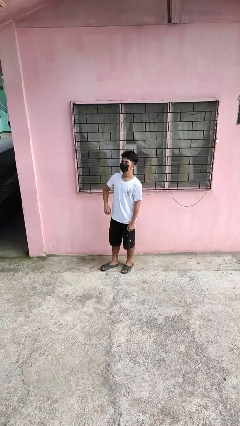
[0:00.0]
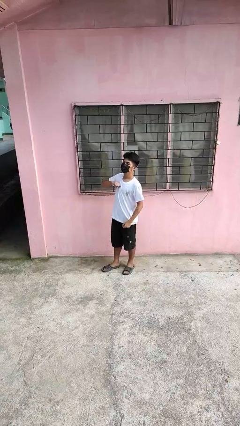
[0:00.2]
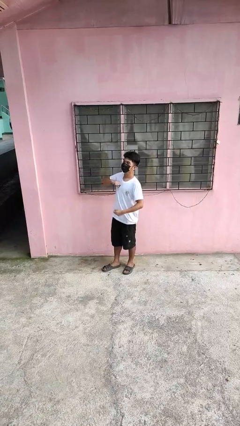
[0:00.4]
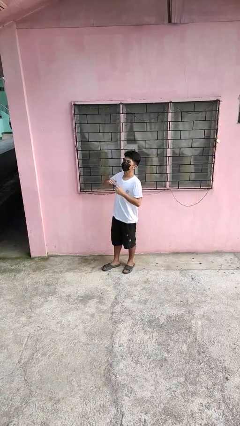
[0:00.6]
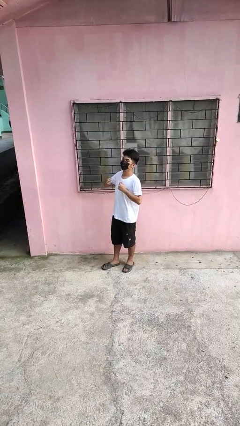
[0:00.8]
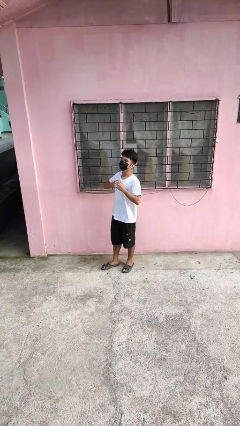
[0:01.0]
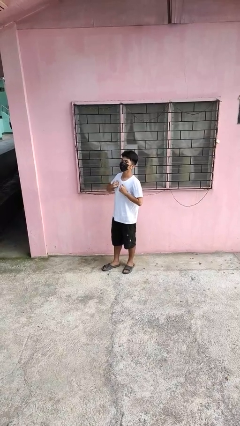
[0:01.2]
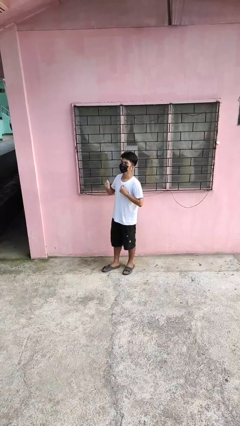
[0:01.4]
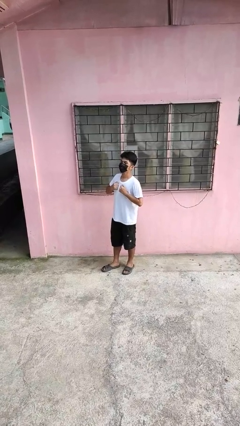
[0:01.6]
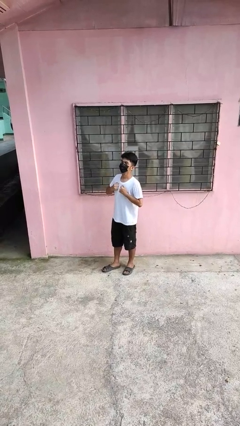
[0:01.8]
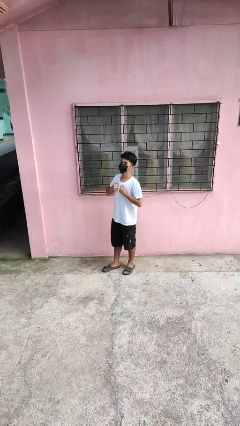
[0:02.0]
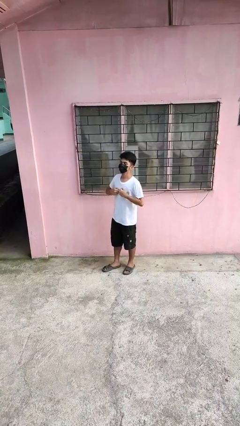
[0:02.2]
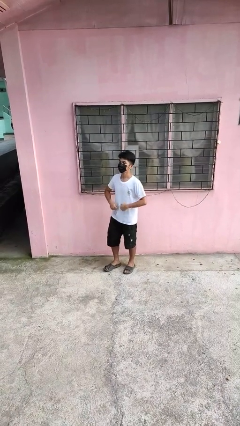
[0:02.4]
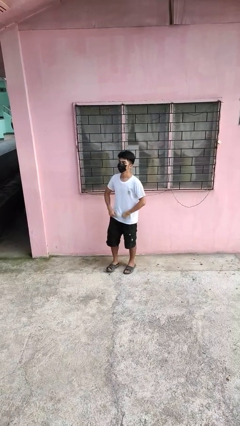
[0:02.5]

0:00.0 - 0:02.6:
person drums on chest

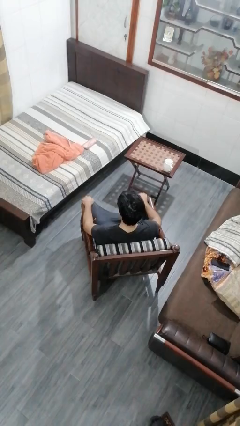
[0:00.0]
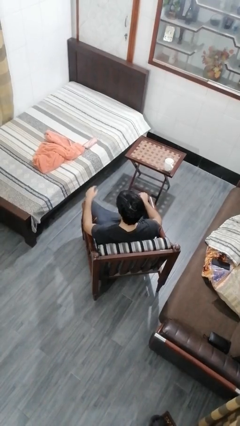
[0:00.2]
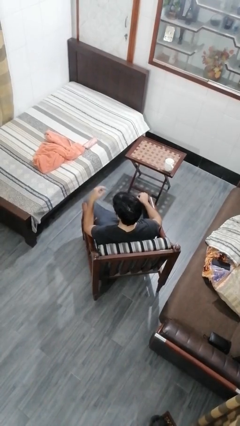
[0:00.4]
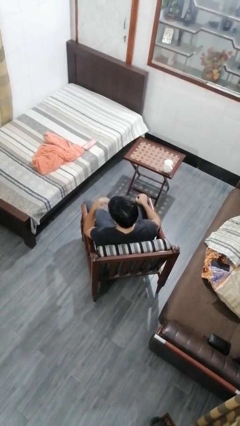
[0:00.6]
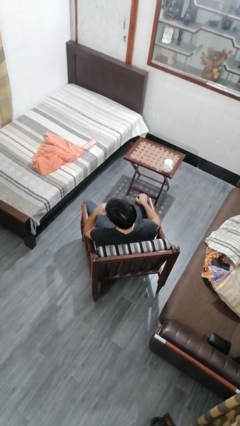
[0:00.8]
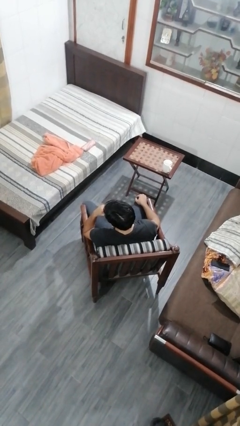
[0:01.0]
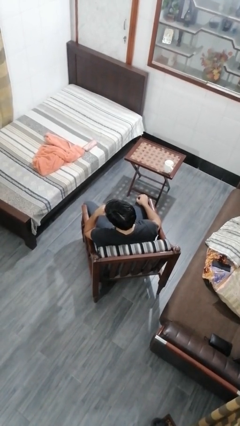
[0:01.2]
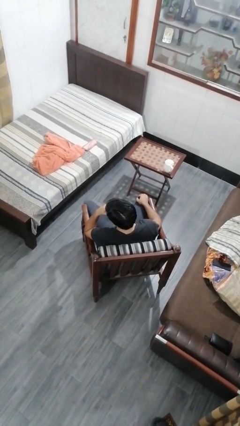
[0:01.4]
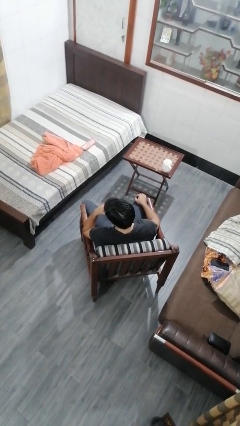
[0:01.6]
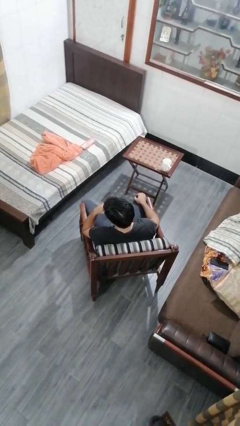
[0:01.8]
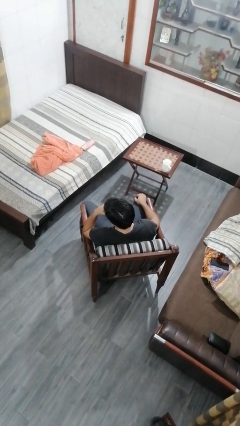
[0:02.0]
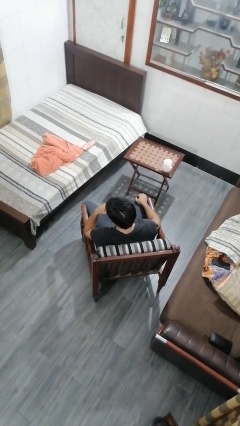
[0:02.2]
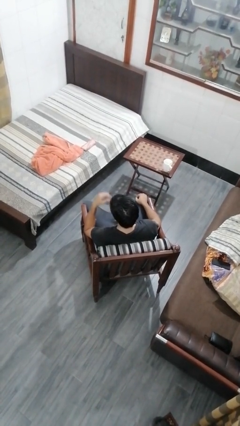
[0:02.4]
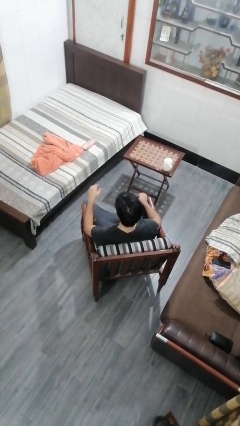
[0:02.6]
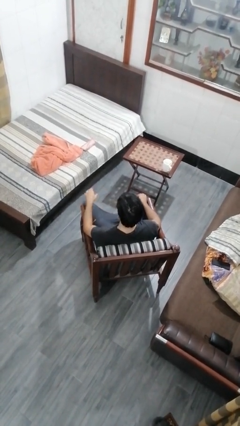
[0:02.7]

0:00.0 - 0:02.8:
person strokes chin

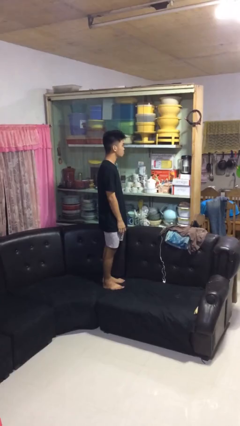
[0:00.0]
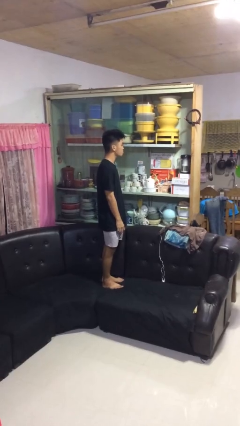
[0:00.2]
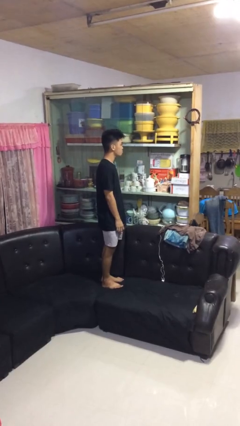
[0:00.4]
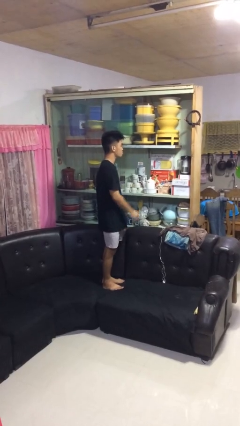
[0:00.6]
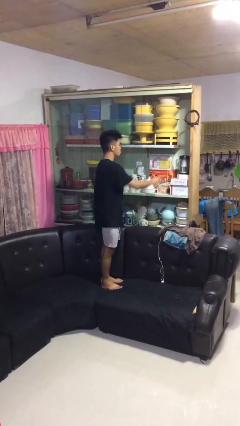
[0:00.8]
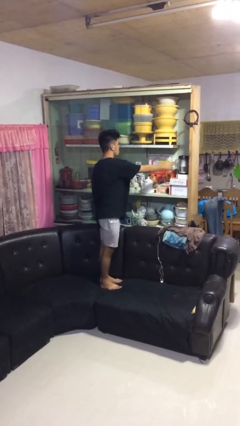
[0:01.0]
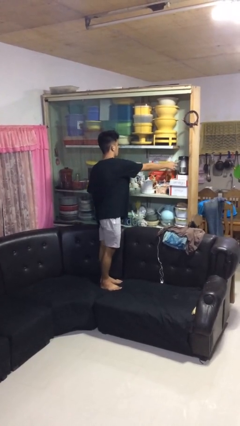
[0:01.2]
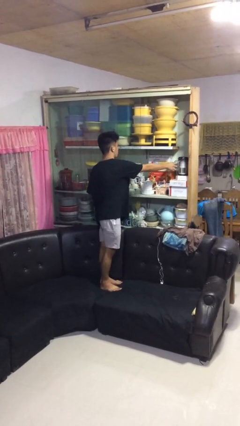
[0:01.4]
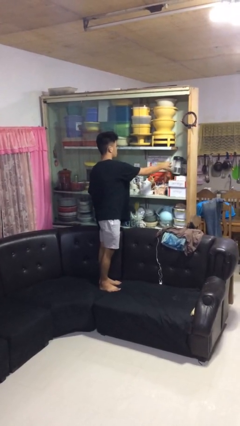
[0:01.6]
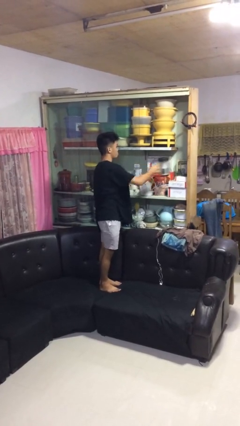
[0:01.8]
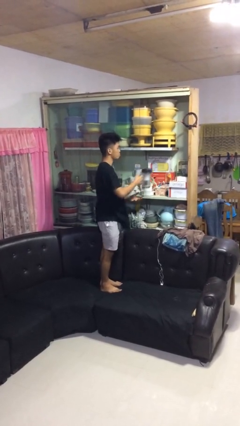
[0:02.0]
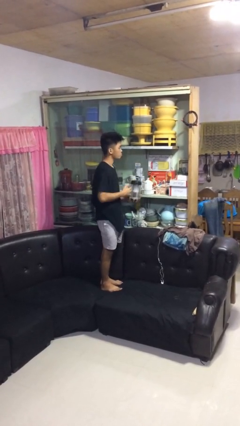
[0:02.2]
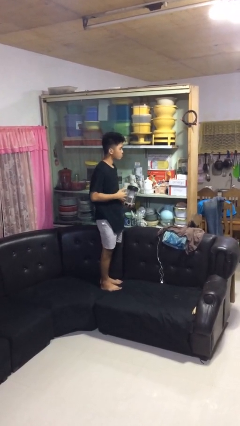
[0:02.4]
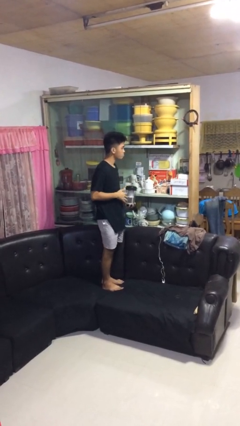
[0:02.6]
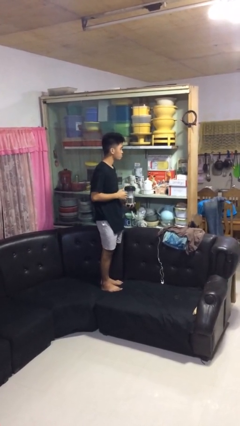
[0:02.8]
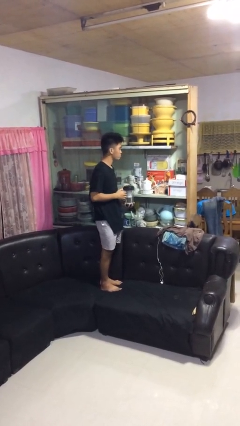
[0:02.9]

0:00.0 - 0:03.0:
person picks up object from cabinet

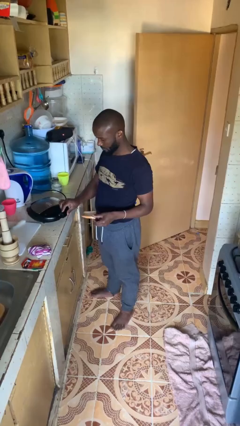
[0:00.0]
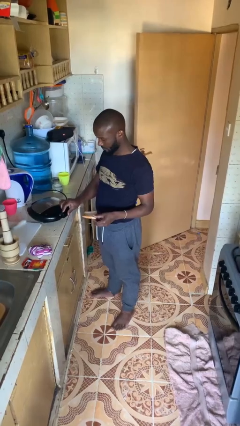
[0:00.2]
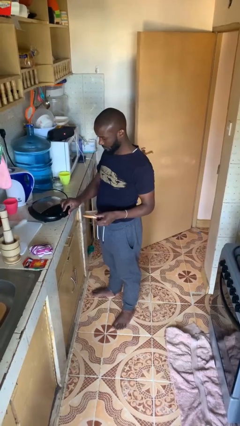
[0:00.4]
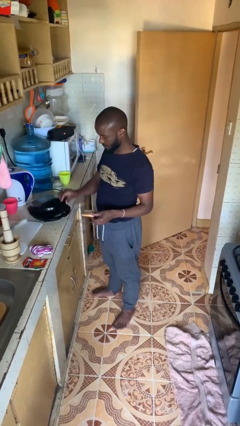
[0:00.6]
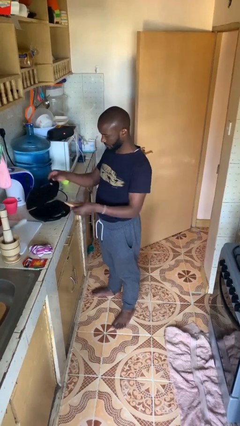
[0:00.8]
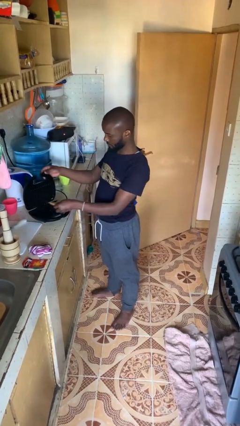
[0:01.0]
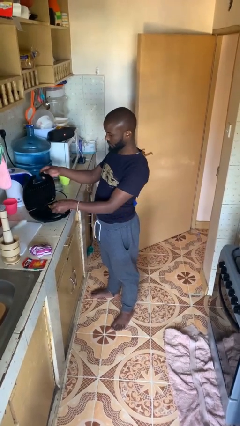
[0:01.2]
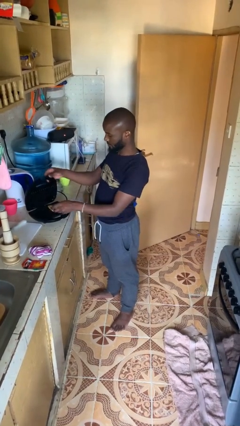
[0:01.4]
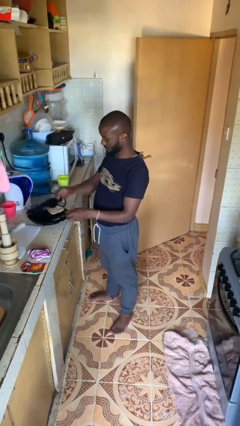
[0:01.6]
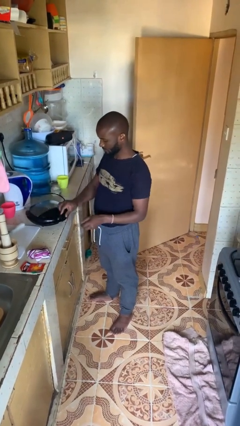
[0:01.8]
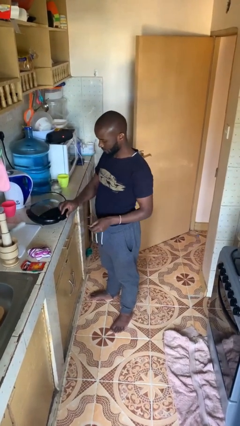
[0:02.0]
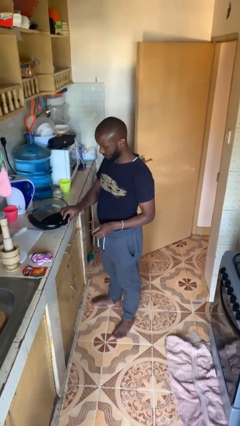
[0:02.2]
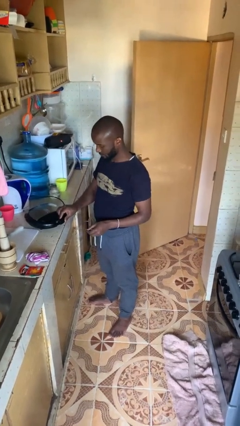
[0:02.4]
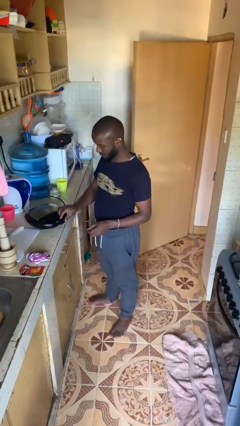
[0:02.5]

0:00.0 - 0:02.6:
person puts object into toaster

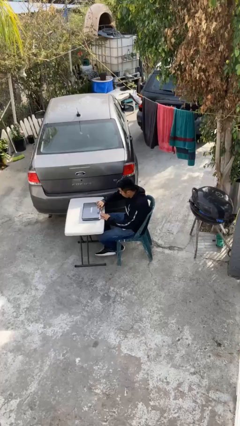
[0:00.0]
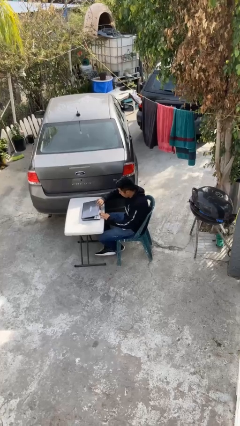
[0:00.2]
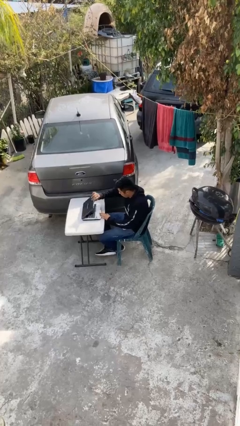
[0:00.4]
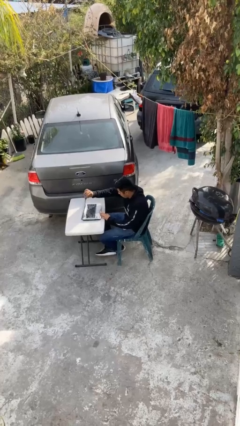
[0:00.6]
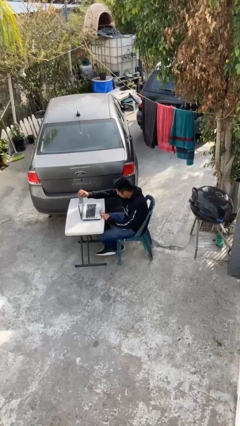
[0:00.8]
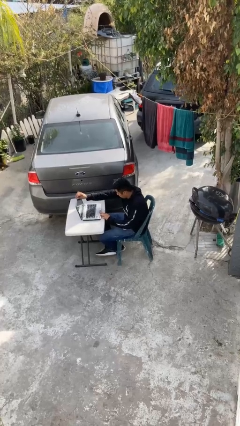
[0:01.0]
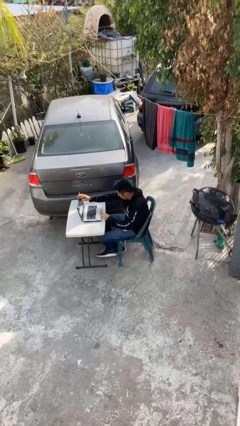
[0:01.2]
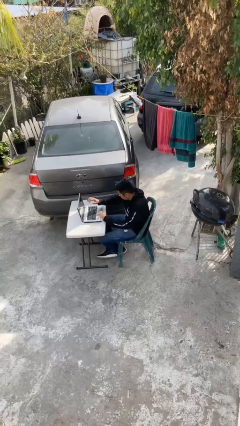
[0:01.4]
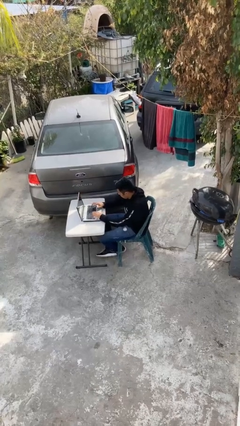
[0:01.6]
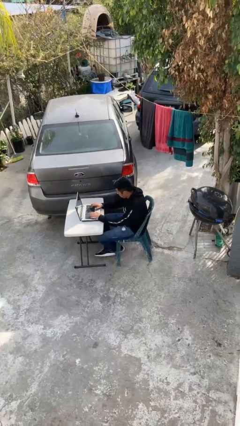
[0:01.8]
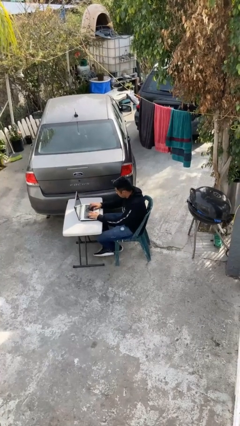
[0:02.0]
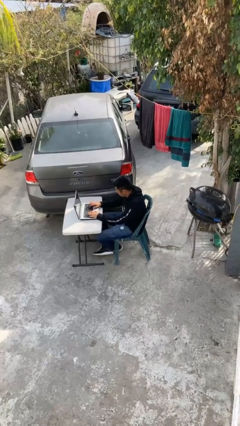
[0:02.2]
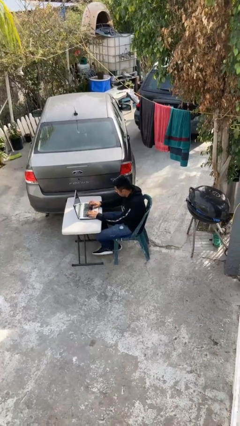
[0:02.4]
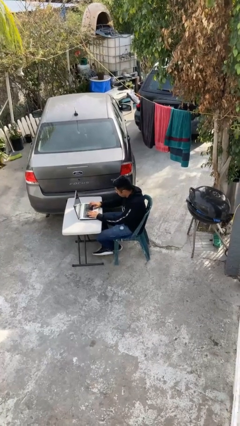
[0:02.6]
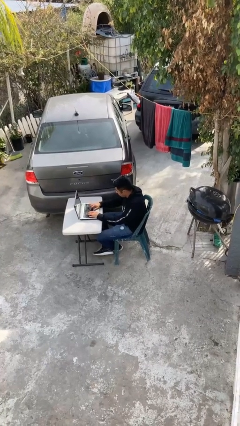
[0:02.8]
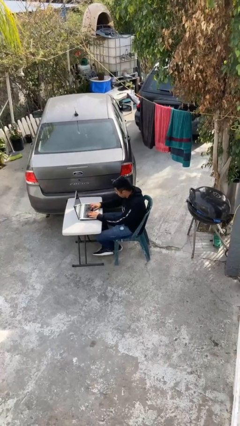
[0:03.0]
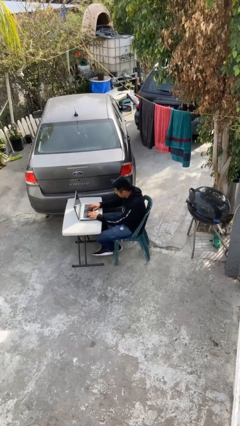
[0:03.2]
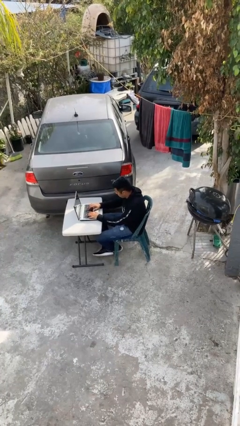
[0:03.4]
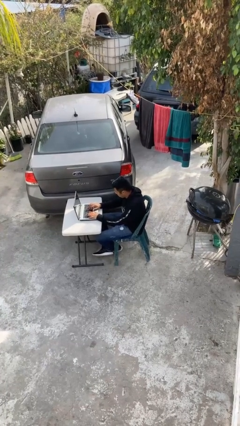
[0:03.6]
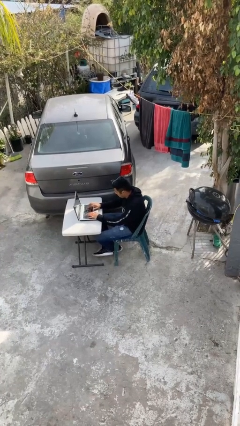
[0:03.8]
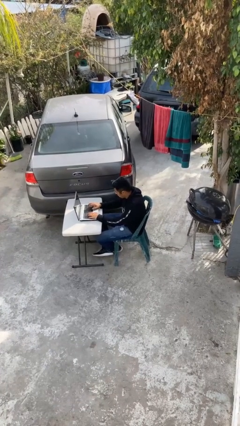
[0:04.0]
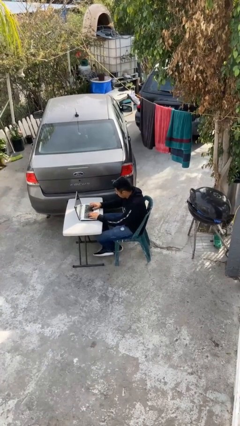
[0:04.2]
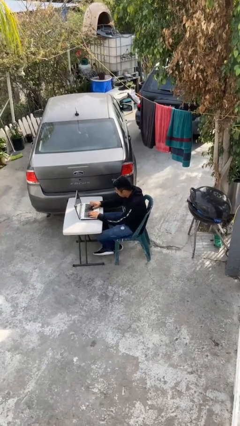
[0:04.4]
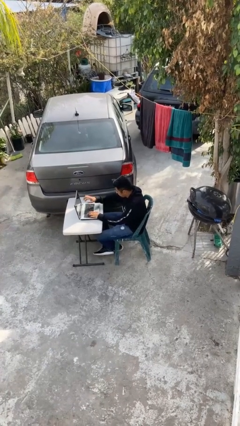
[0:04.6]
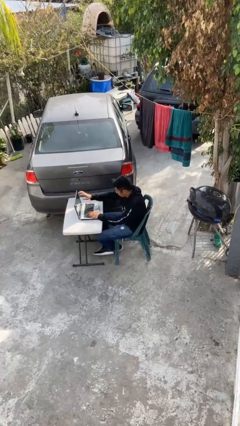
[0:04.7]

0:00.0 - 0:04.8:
person interacts with laptop

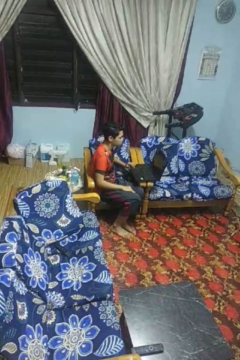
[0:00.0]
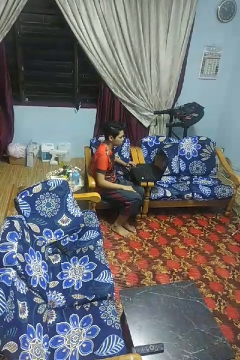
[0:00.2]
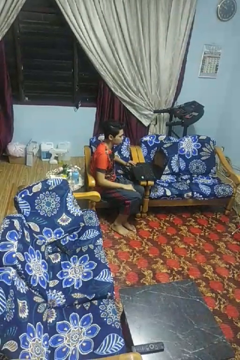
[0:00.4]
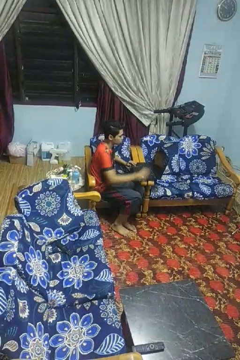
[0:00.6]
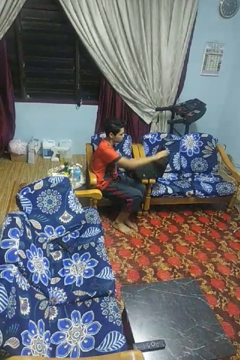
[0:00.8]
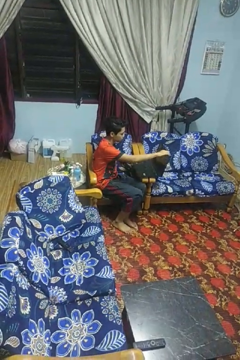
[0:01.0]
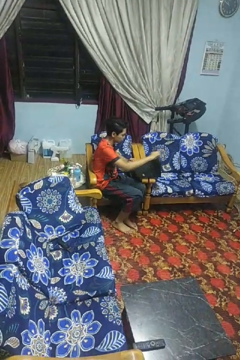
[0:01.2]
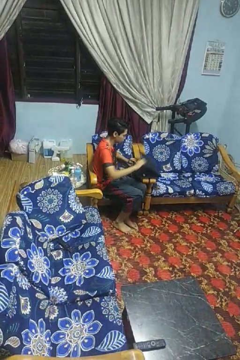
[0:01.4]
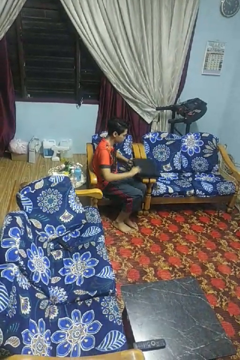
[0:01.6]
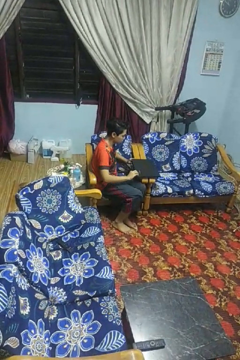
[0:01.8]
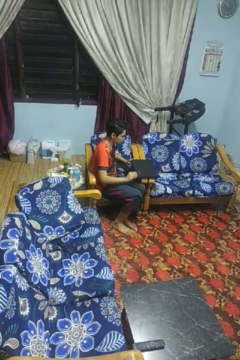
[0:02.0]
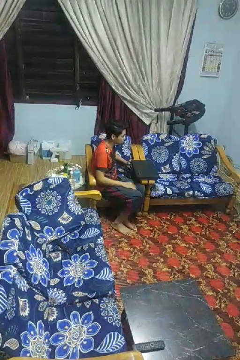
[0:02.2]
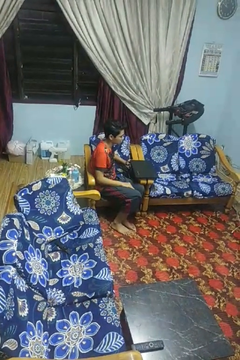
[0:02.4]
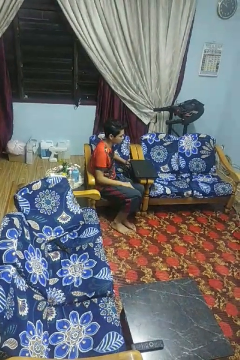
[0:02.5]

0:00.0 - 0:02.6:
person closes laptop
